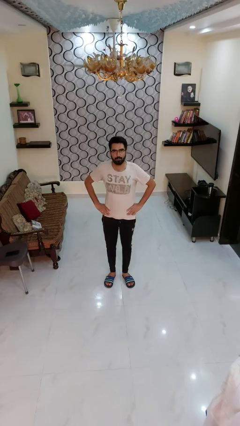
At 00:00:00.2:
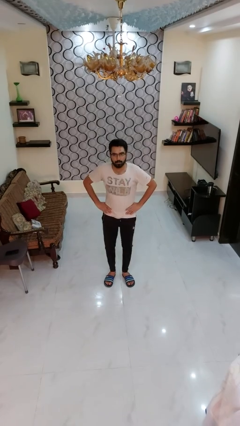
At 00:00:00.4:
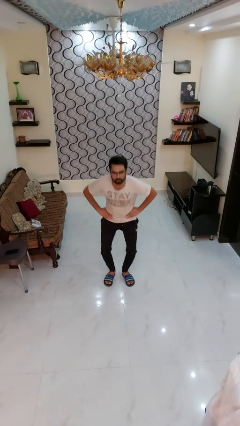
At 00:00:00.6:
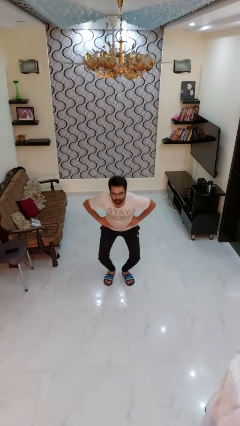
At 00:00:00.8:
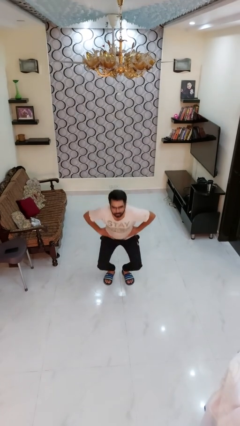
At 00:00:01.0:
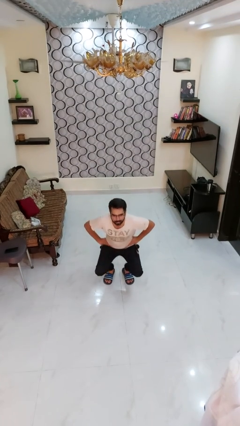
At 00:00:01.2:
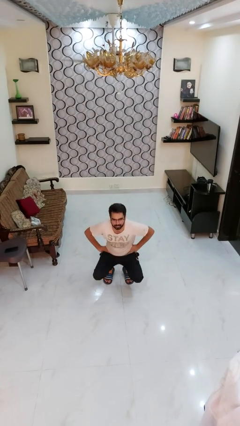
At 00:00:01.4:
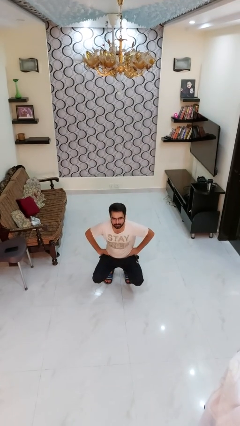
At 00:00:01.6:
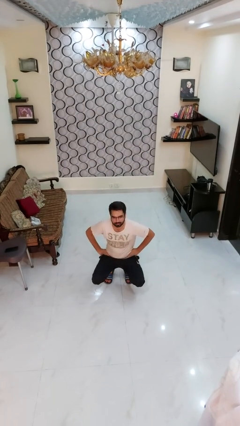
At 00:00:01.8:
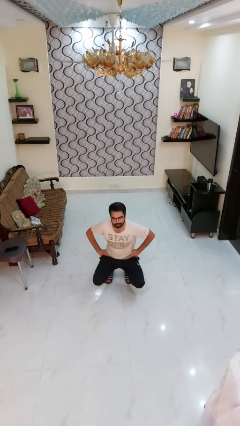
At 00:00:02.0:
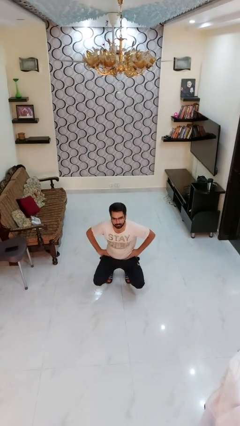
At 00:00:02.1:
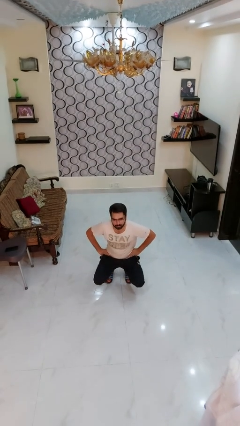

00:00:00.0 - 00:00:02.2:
person squats

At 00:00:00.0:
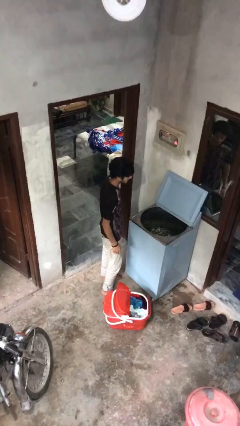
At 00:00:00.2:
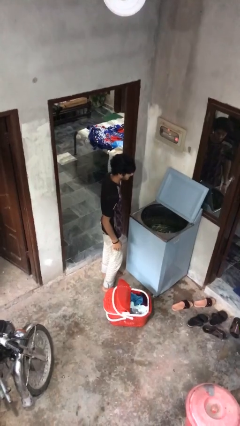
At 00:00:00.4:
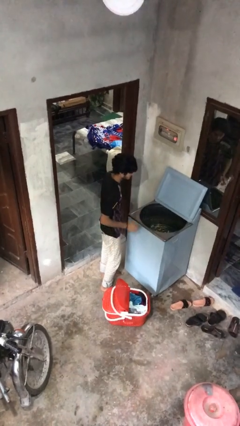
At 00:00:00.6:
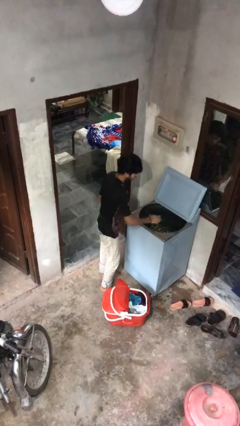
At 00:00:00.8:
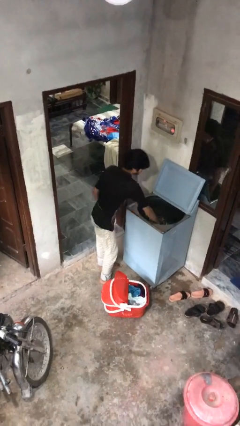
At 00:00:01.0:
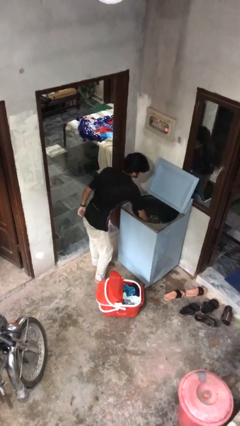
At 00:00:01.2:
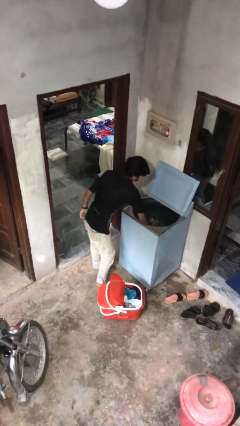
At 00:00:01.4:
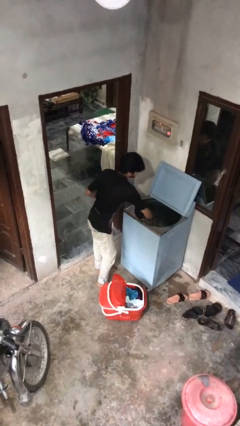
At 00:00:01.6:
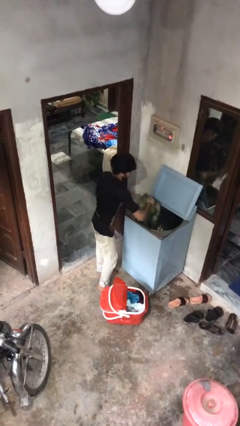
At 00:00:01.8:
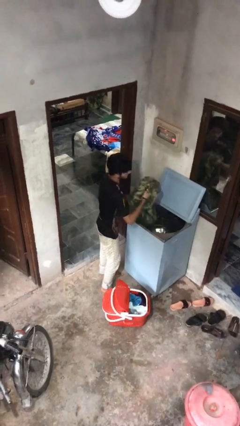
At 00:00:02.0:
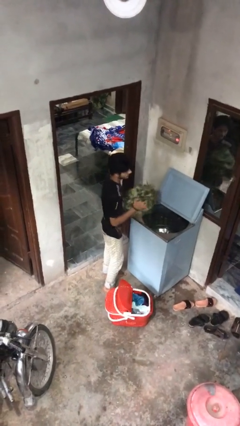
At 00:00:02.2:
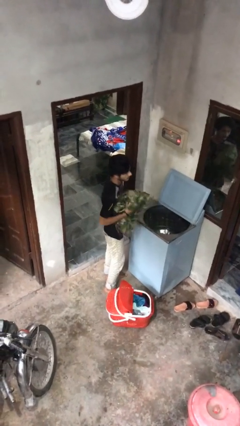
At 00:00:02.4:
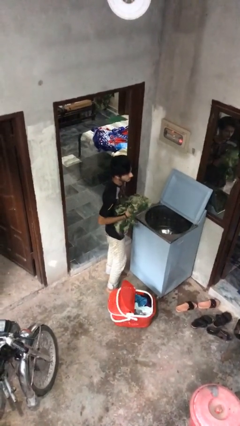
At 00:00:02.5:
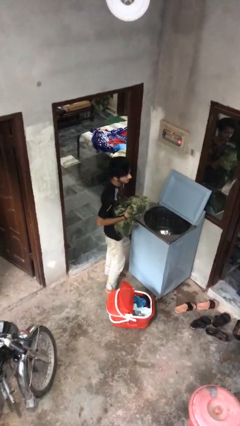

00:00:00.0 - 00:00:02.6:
person unloads clotheswasher

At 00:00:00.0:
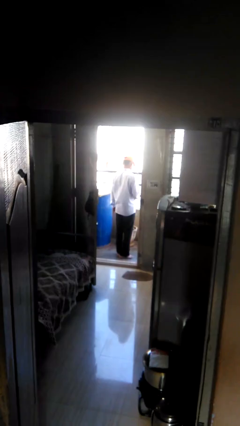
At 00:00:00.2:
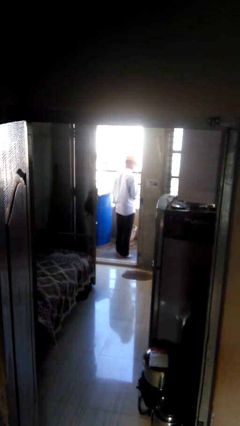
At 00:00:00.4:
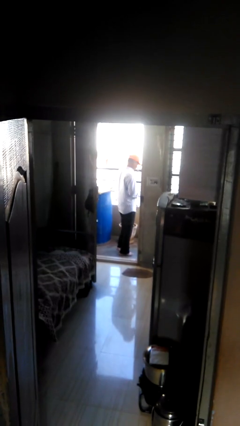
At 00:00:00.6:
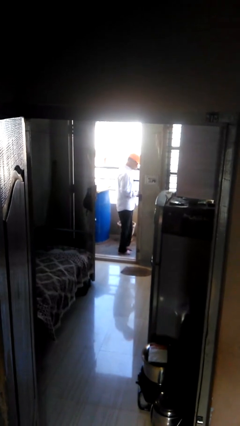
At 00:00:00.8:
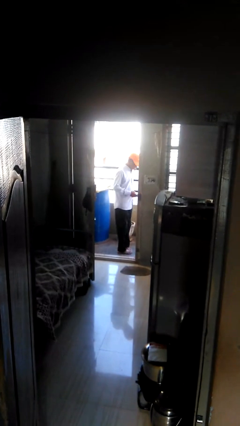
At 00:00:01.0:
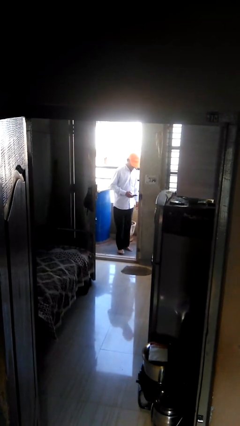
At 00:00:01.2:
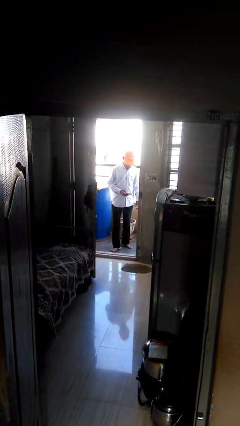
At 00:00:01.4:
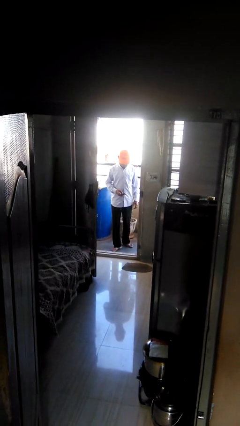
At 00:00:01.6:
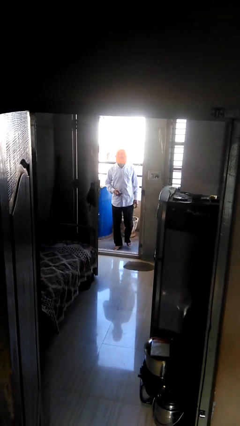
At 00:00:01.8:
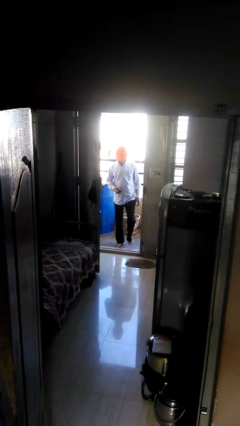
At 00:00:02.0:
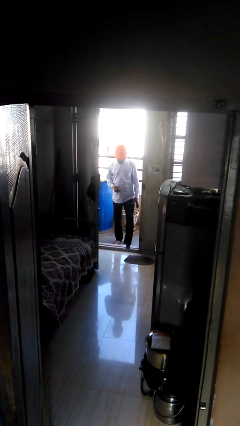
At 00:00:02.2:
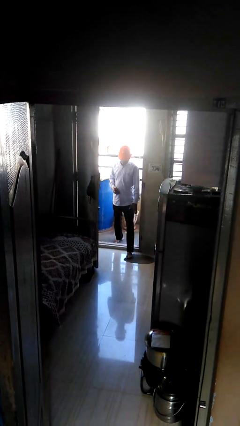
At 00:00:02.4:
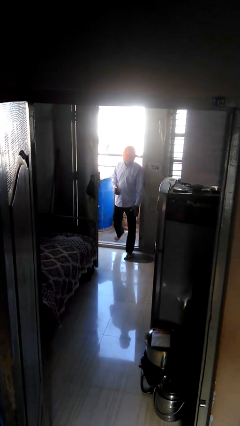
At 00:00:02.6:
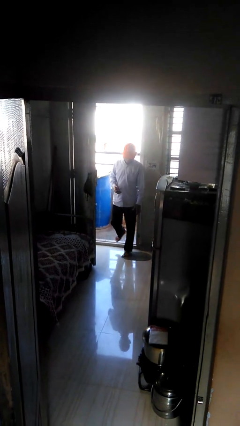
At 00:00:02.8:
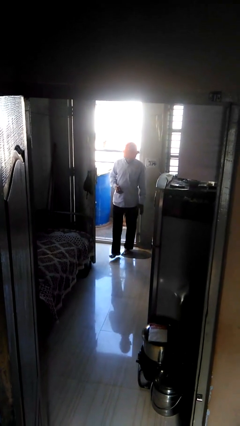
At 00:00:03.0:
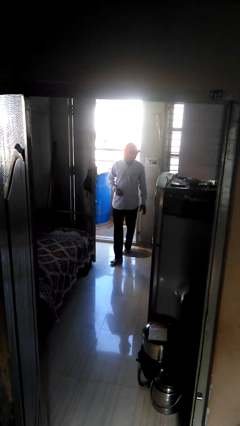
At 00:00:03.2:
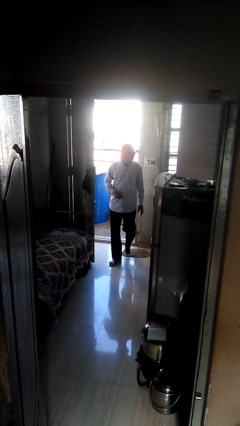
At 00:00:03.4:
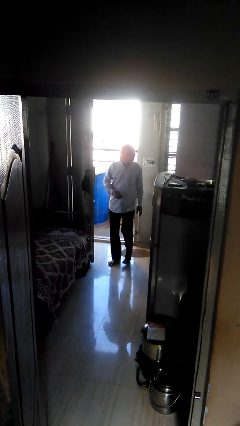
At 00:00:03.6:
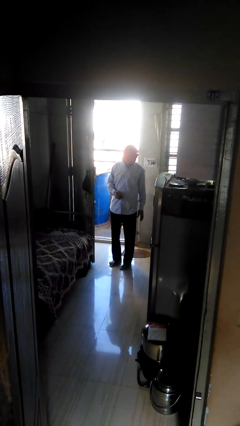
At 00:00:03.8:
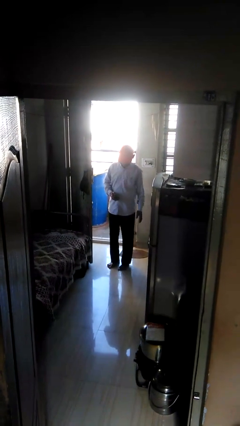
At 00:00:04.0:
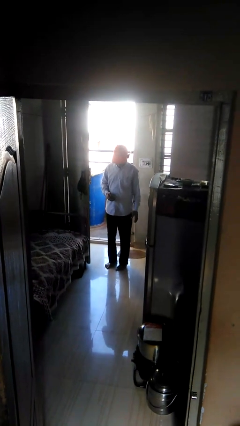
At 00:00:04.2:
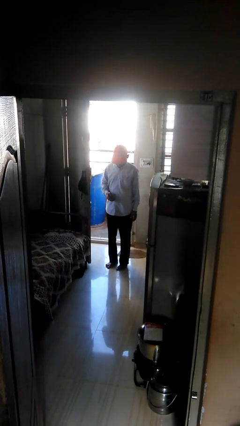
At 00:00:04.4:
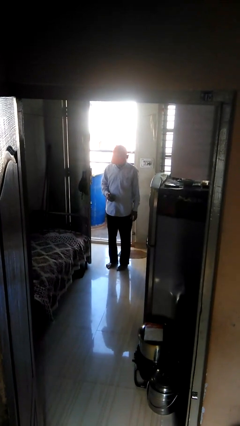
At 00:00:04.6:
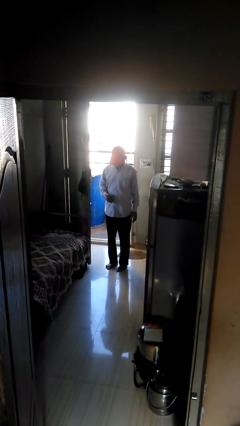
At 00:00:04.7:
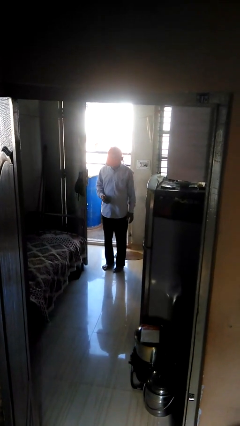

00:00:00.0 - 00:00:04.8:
person enters scene through structure

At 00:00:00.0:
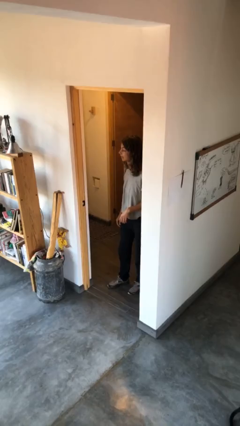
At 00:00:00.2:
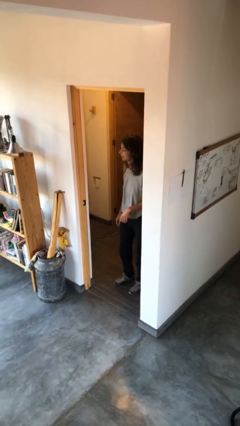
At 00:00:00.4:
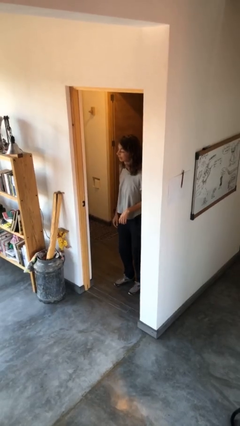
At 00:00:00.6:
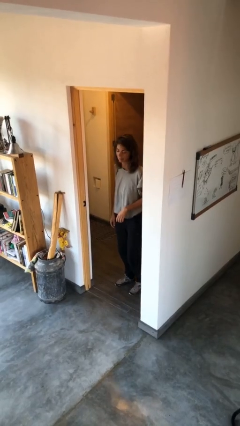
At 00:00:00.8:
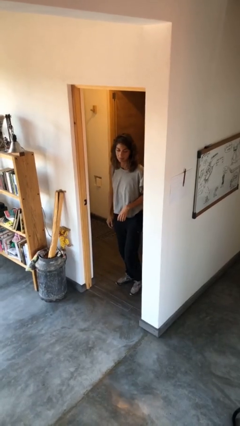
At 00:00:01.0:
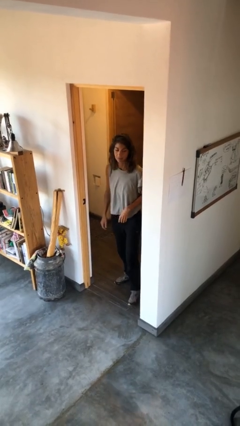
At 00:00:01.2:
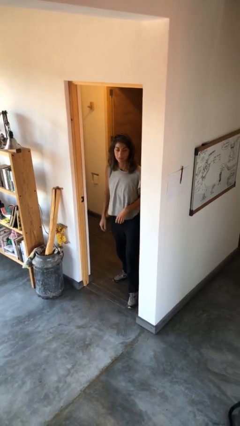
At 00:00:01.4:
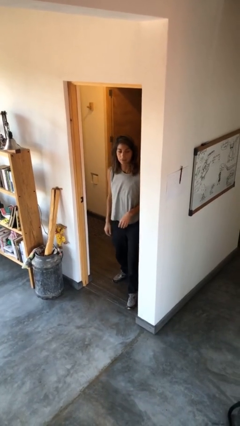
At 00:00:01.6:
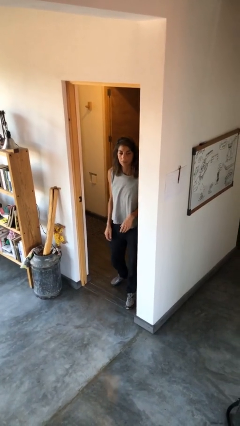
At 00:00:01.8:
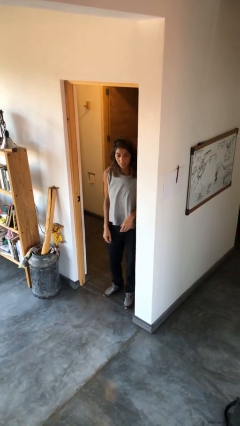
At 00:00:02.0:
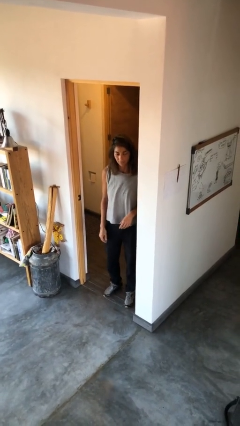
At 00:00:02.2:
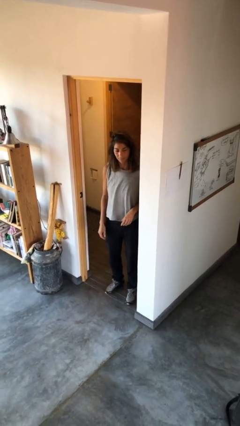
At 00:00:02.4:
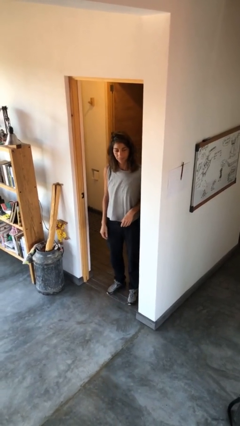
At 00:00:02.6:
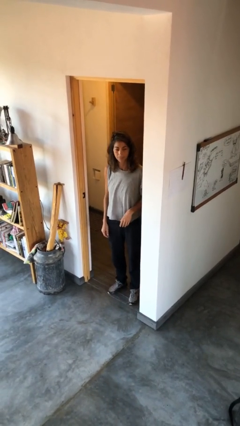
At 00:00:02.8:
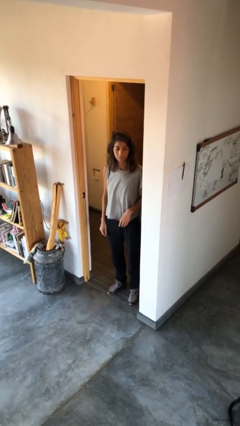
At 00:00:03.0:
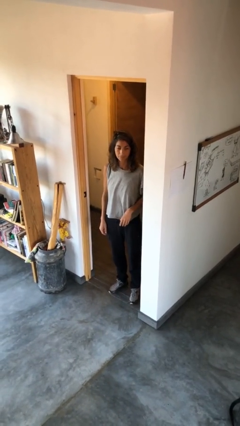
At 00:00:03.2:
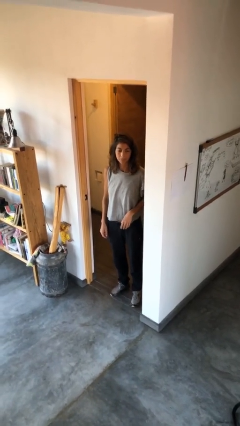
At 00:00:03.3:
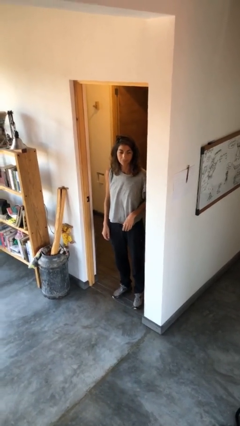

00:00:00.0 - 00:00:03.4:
person bumps into wall

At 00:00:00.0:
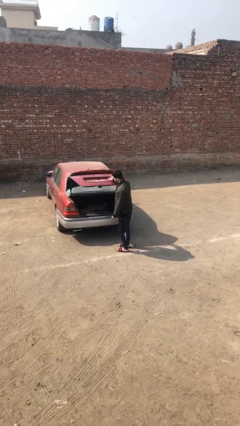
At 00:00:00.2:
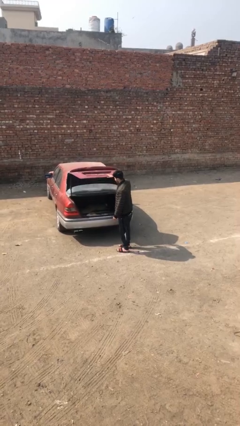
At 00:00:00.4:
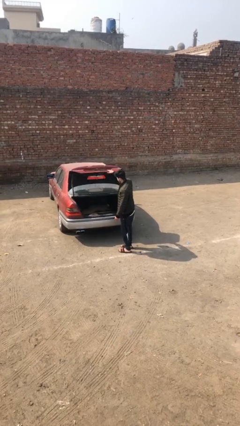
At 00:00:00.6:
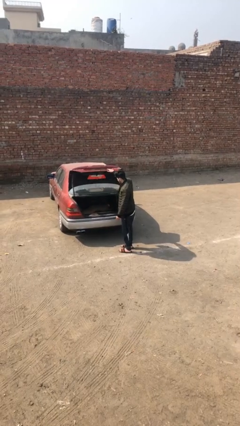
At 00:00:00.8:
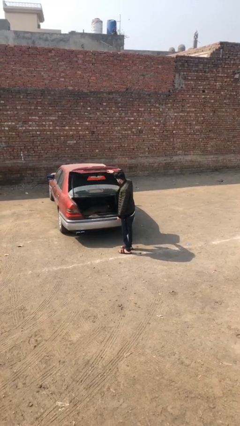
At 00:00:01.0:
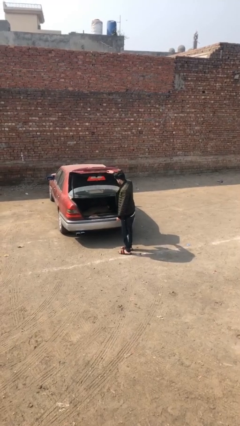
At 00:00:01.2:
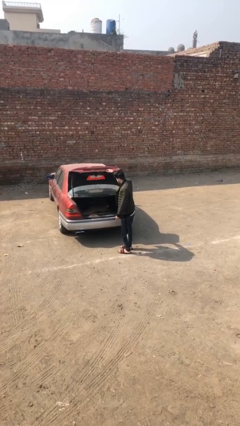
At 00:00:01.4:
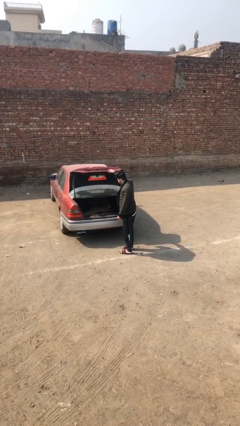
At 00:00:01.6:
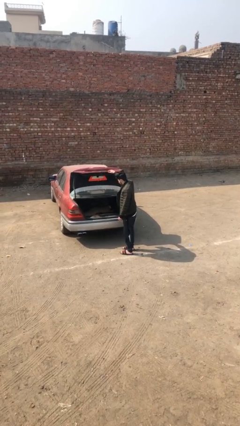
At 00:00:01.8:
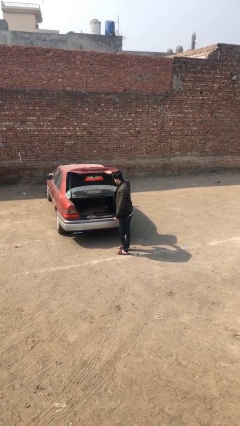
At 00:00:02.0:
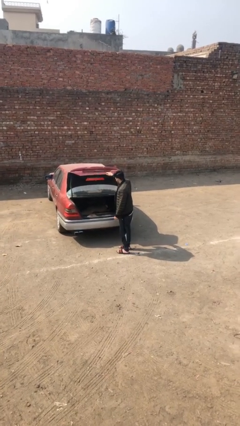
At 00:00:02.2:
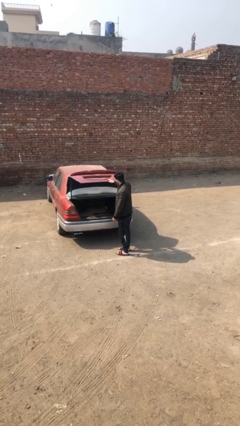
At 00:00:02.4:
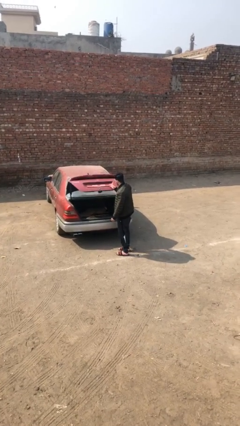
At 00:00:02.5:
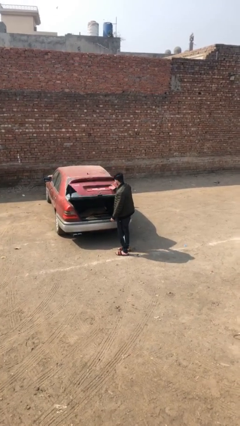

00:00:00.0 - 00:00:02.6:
person opens car trunk

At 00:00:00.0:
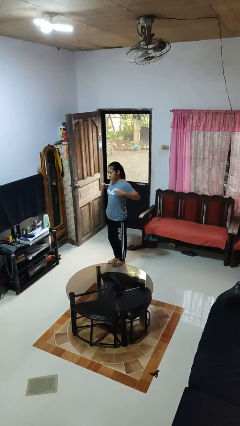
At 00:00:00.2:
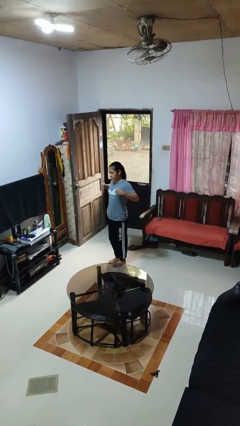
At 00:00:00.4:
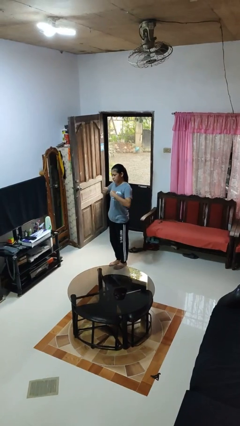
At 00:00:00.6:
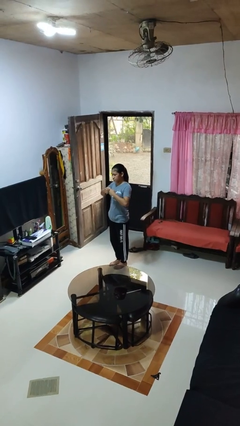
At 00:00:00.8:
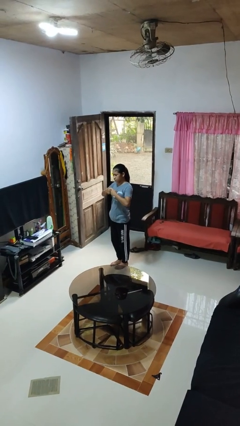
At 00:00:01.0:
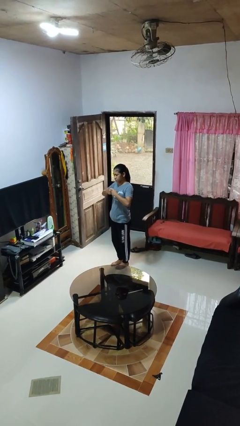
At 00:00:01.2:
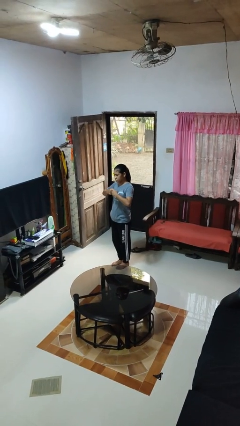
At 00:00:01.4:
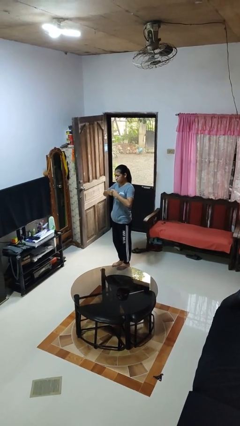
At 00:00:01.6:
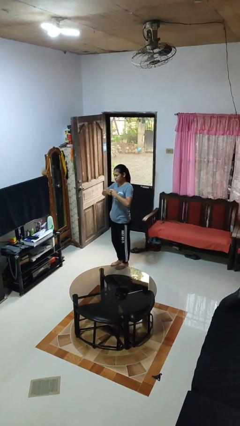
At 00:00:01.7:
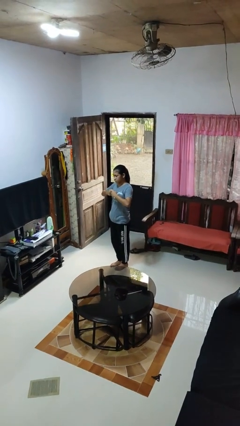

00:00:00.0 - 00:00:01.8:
person gestures zoom out
